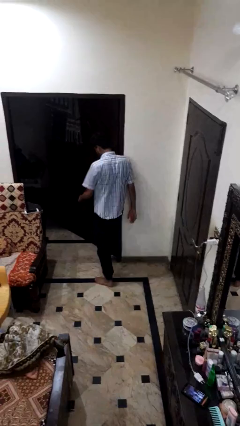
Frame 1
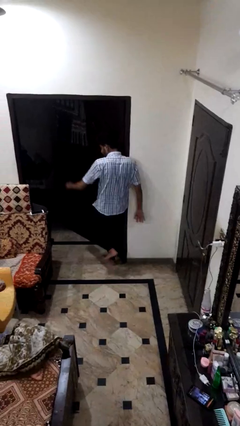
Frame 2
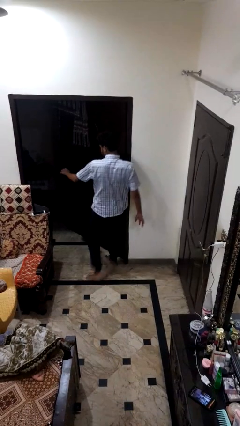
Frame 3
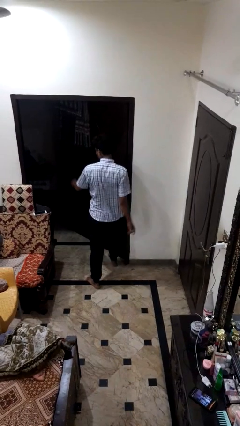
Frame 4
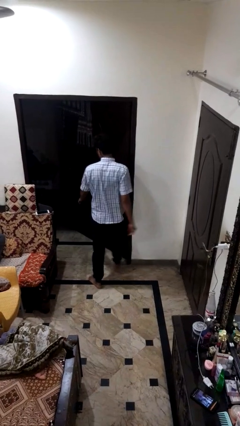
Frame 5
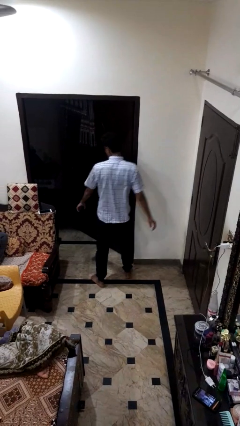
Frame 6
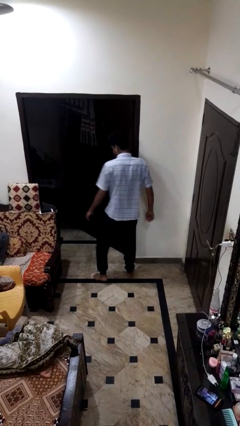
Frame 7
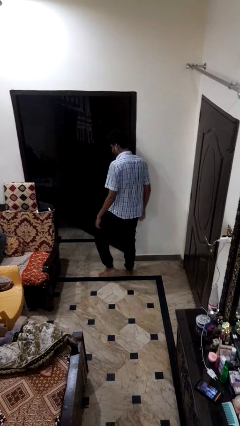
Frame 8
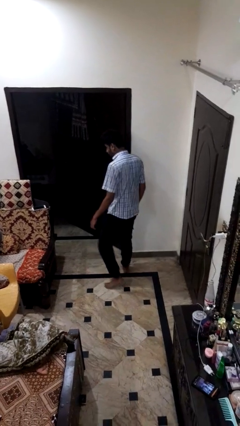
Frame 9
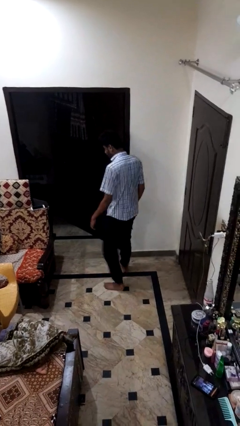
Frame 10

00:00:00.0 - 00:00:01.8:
person bumps into wall

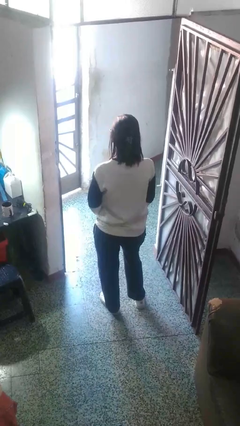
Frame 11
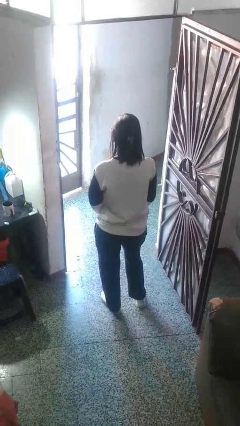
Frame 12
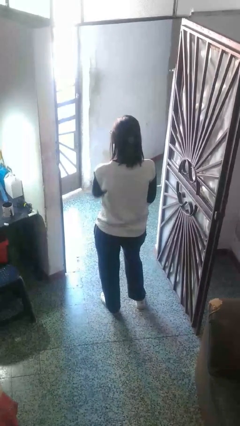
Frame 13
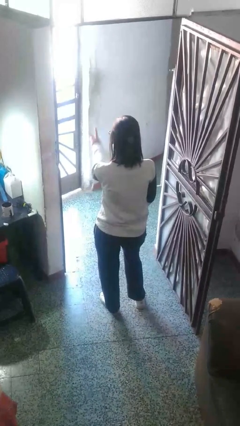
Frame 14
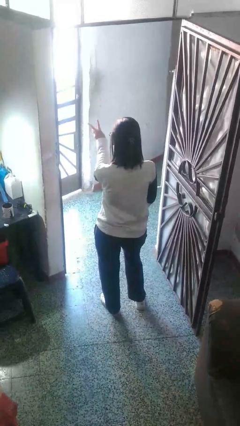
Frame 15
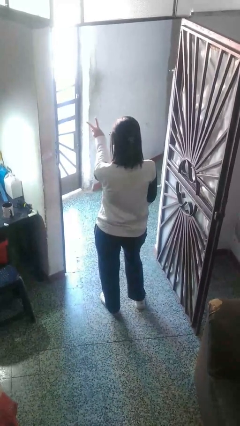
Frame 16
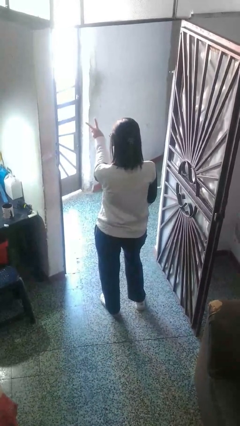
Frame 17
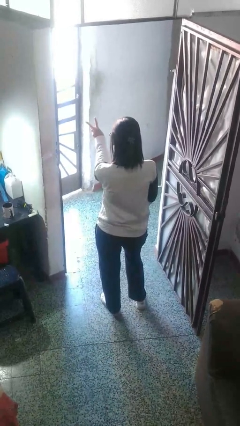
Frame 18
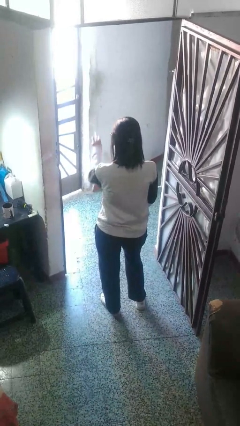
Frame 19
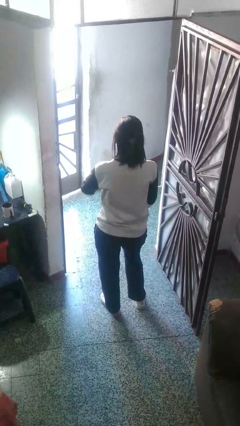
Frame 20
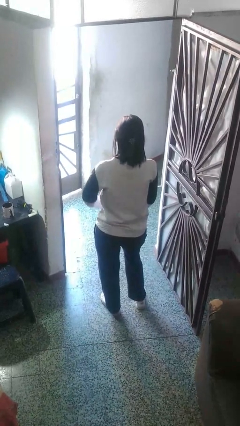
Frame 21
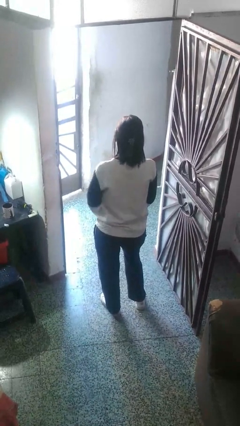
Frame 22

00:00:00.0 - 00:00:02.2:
person gestures peace

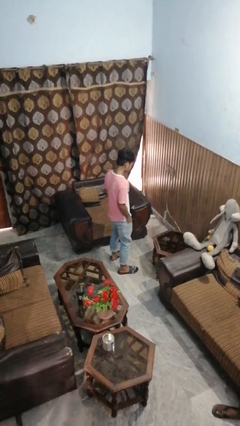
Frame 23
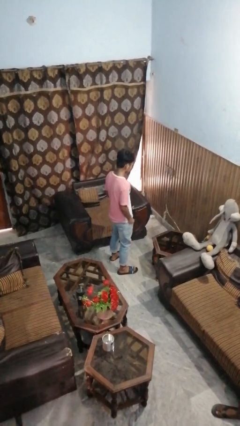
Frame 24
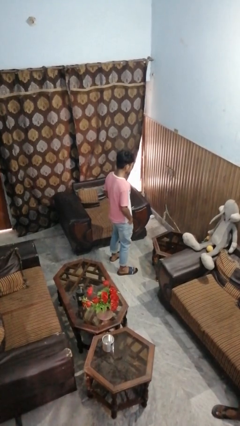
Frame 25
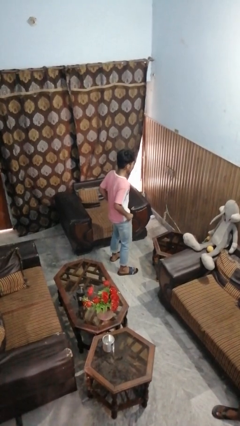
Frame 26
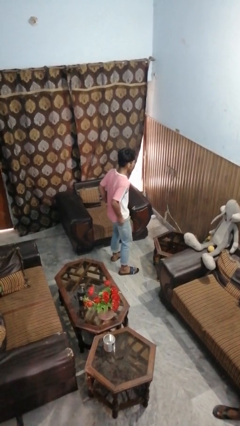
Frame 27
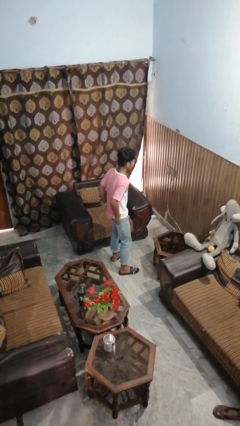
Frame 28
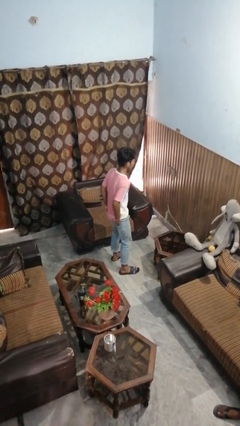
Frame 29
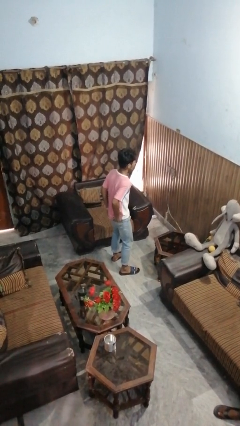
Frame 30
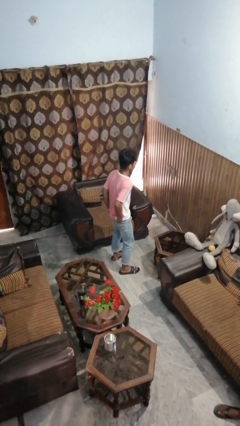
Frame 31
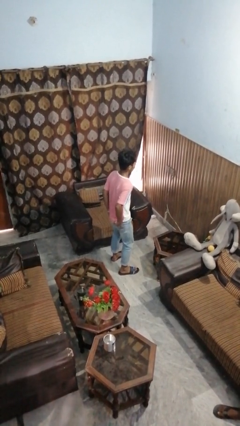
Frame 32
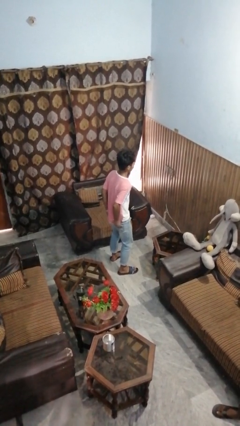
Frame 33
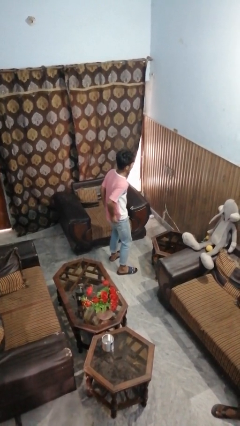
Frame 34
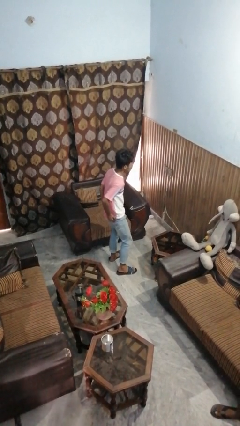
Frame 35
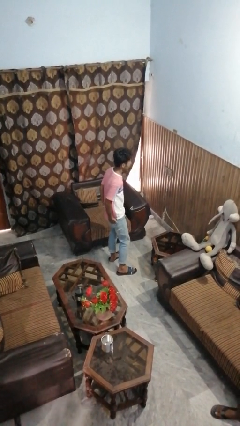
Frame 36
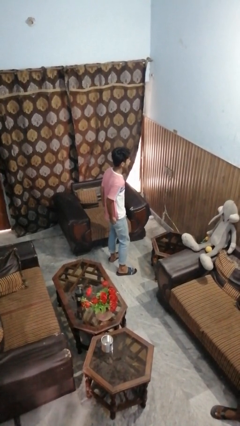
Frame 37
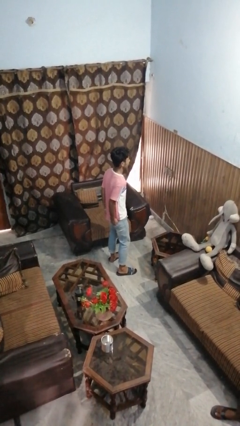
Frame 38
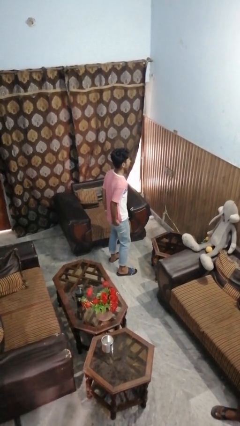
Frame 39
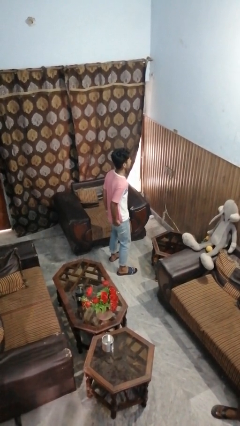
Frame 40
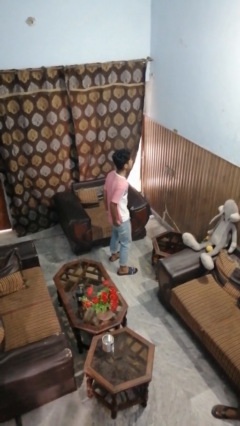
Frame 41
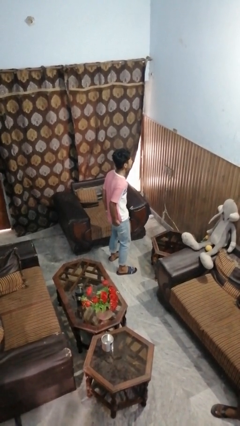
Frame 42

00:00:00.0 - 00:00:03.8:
person puts hands in back pockets

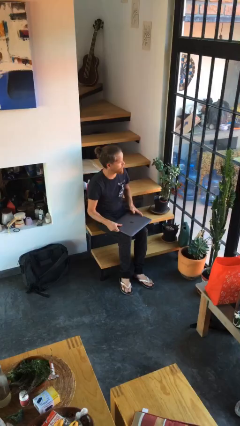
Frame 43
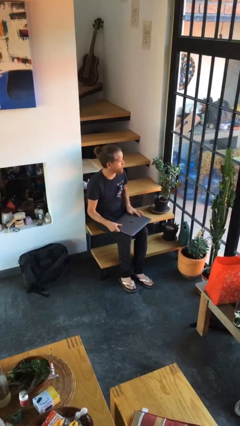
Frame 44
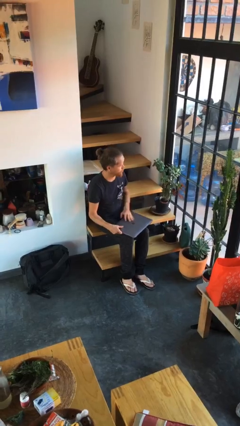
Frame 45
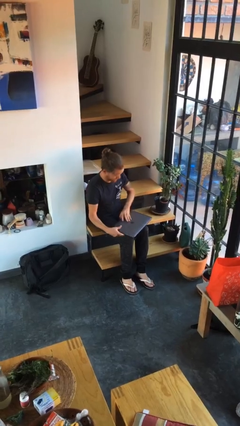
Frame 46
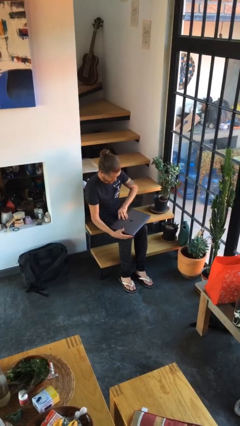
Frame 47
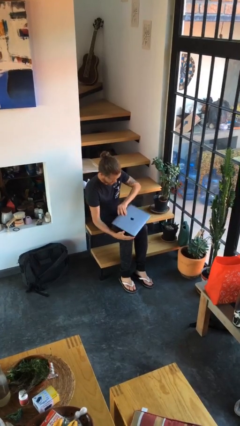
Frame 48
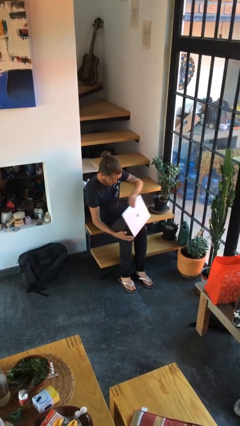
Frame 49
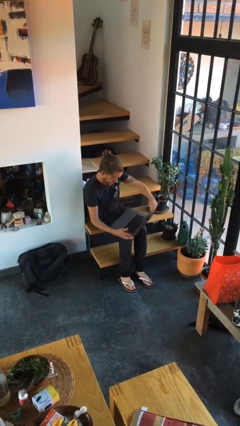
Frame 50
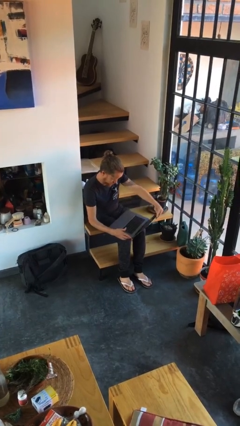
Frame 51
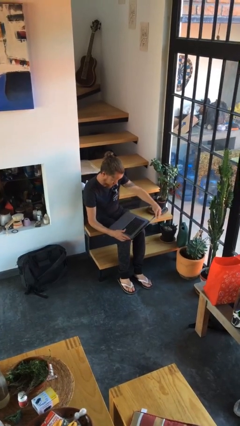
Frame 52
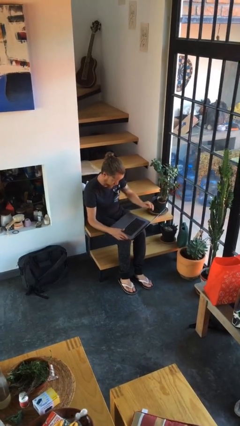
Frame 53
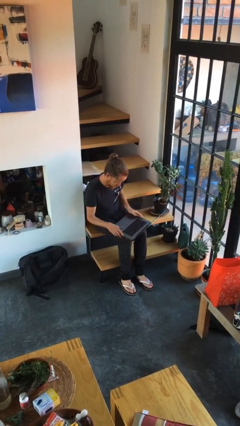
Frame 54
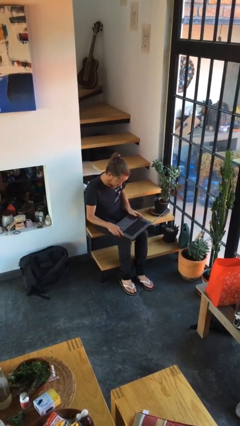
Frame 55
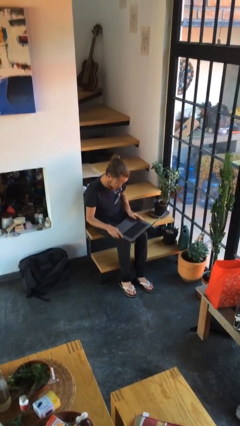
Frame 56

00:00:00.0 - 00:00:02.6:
person opens laptop

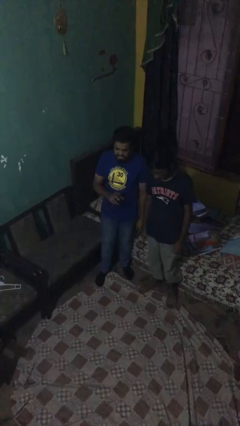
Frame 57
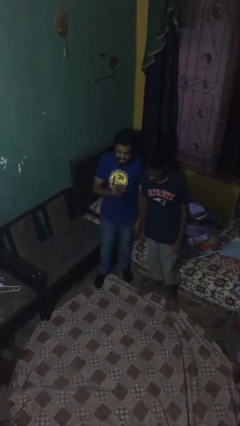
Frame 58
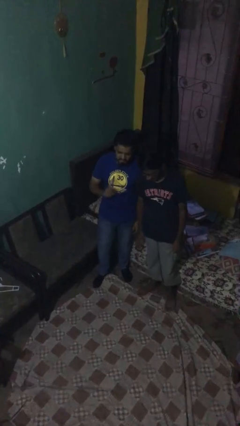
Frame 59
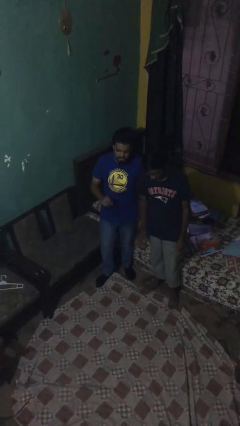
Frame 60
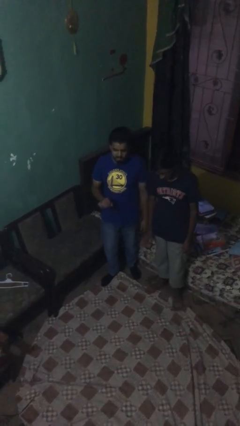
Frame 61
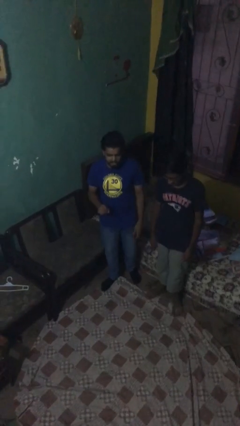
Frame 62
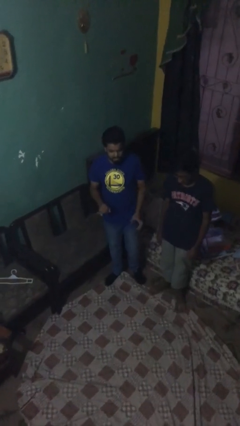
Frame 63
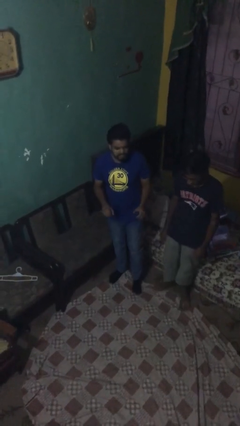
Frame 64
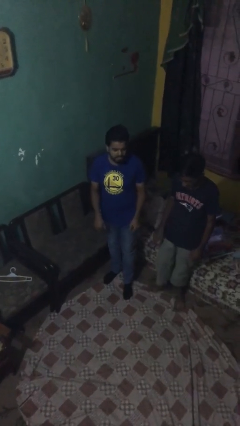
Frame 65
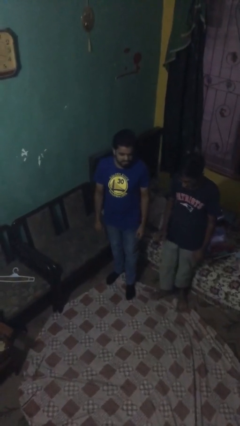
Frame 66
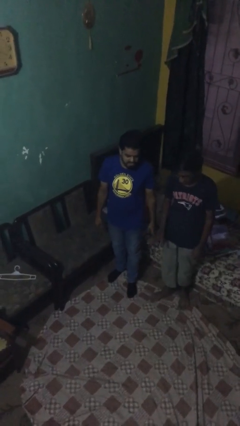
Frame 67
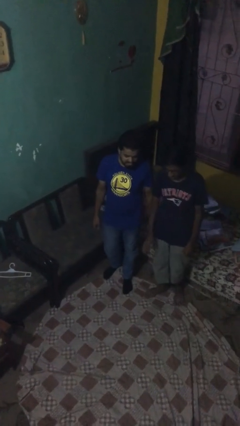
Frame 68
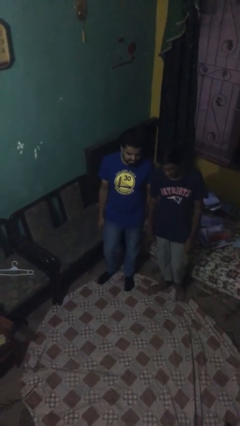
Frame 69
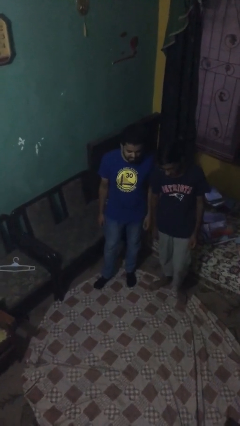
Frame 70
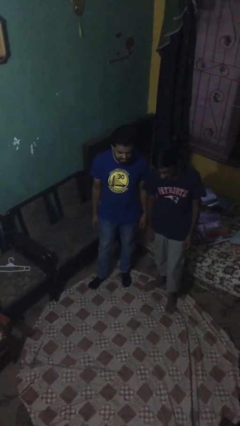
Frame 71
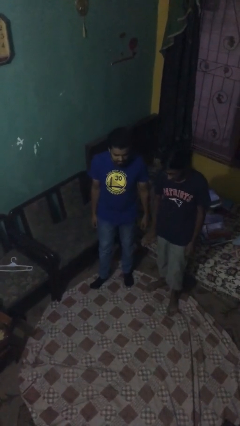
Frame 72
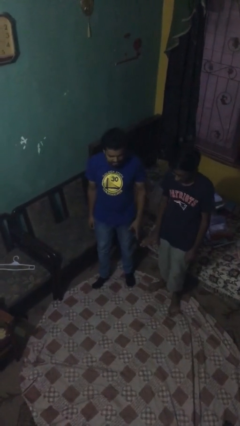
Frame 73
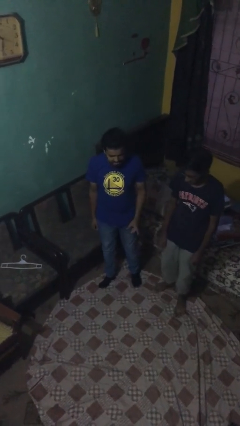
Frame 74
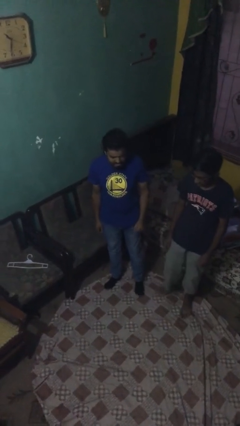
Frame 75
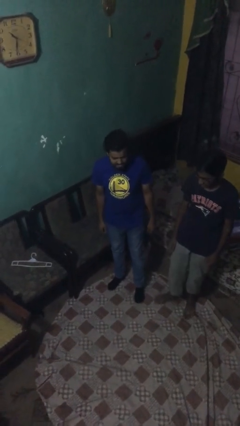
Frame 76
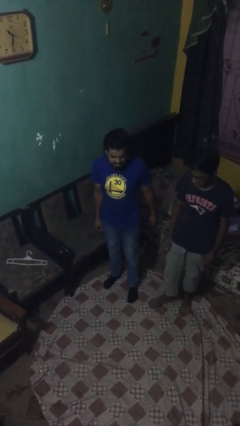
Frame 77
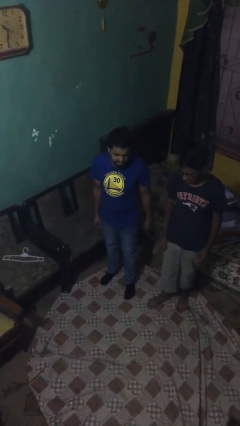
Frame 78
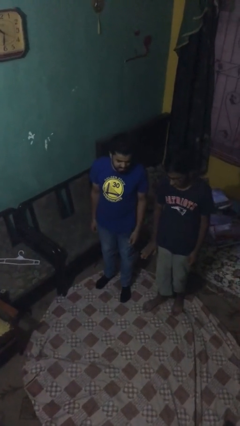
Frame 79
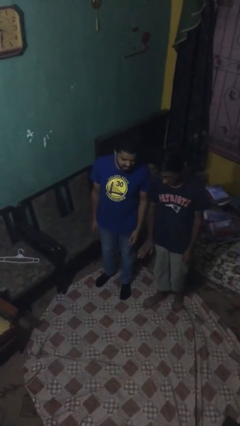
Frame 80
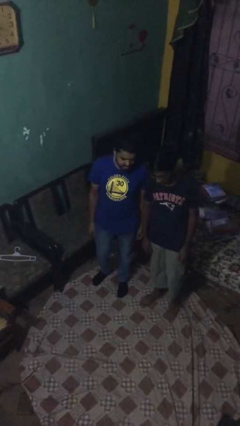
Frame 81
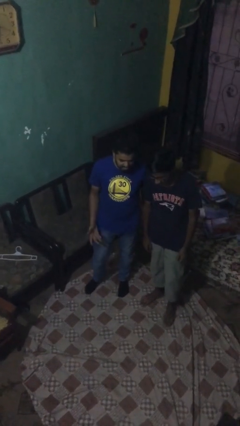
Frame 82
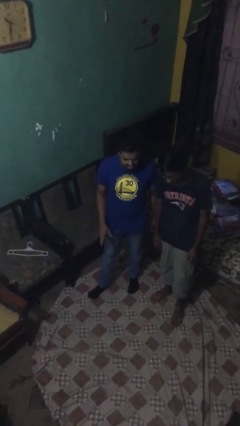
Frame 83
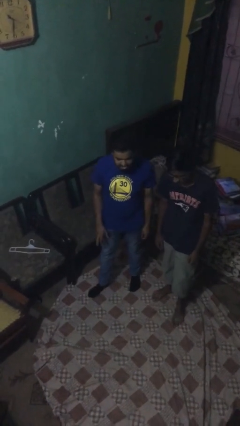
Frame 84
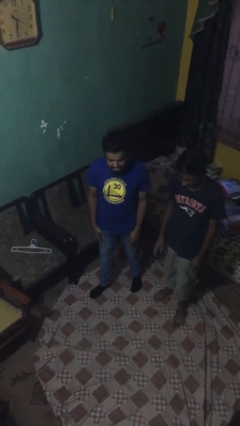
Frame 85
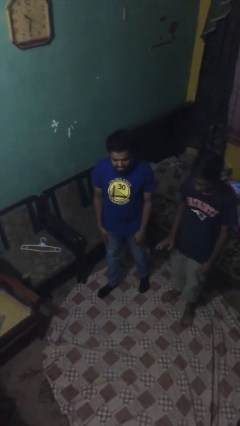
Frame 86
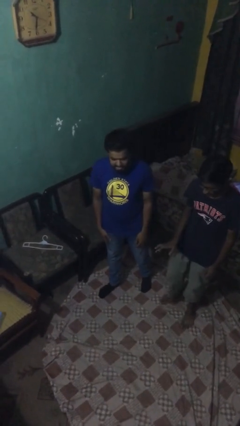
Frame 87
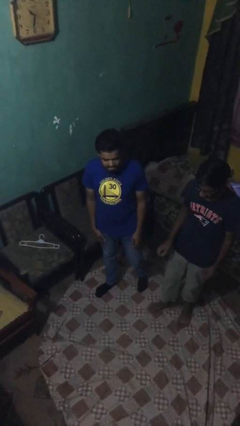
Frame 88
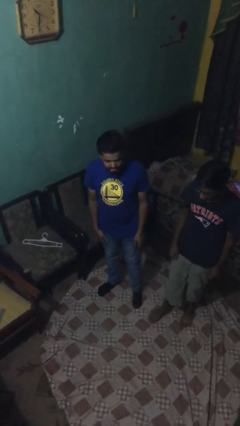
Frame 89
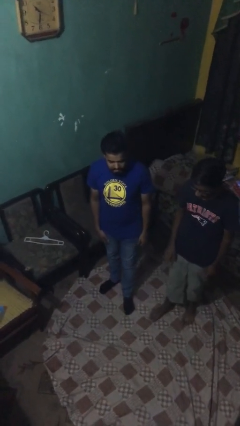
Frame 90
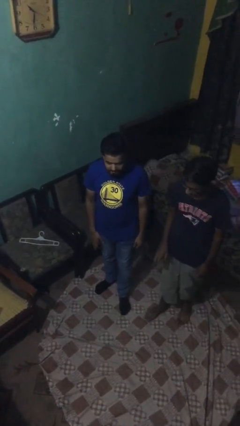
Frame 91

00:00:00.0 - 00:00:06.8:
person talks to person

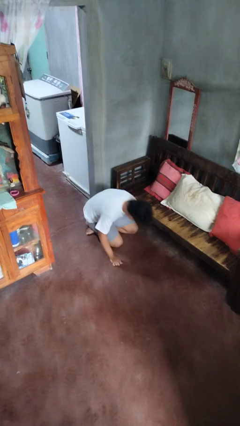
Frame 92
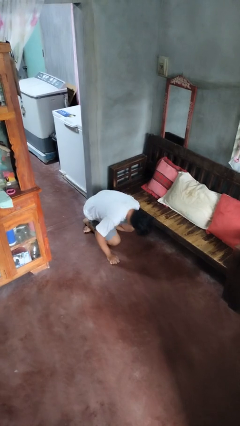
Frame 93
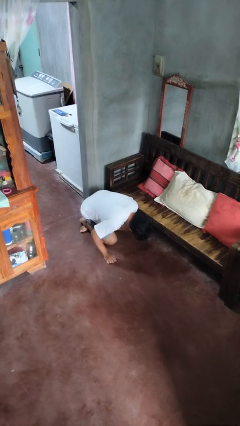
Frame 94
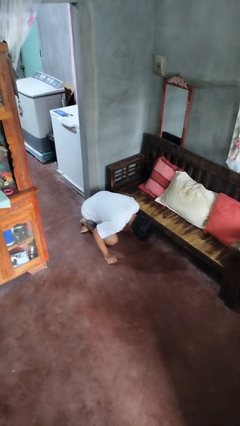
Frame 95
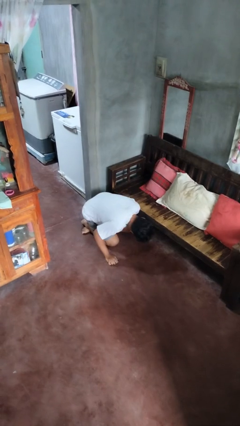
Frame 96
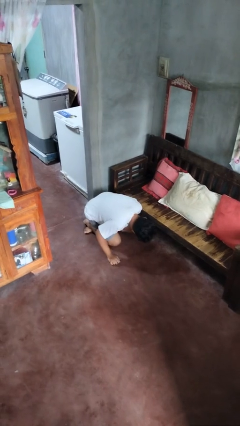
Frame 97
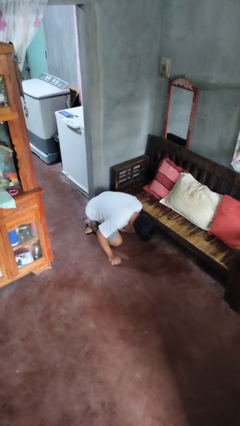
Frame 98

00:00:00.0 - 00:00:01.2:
person searches under couch
